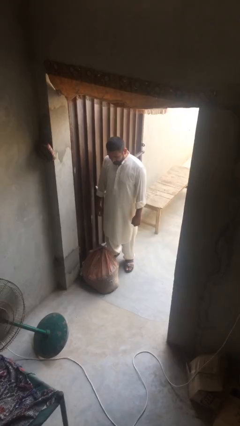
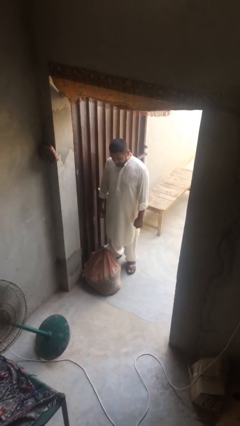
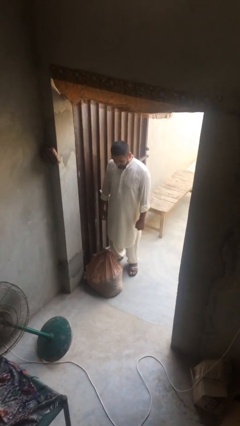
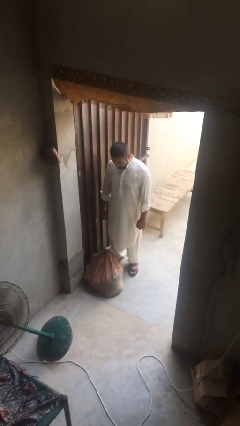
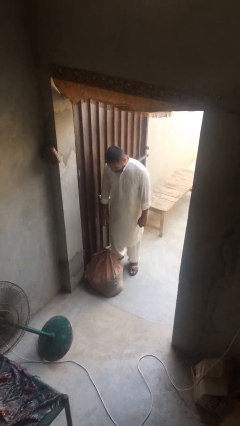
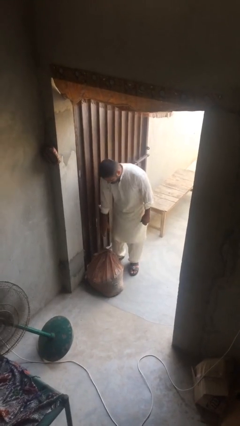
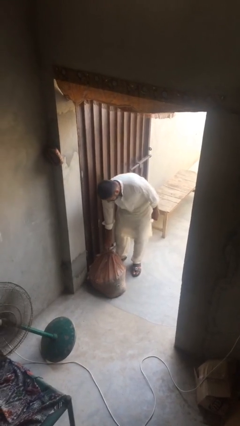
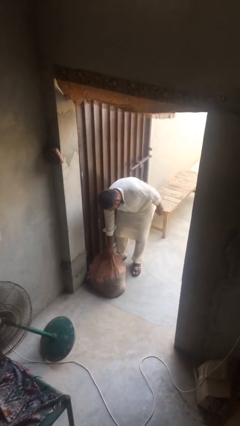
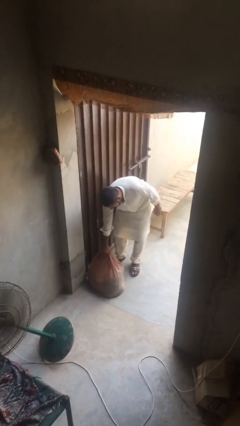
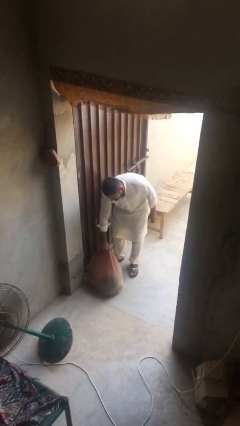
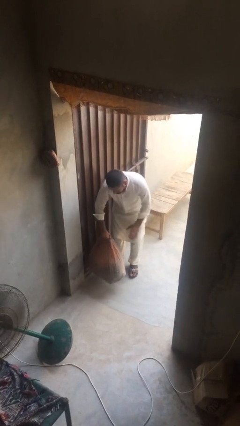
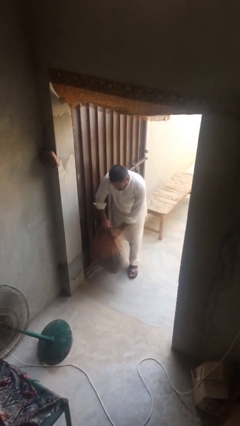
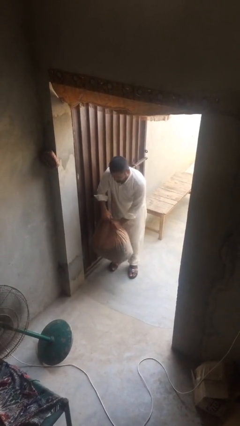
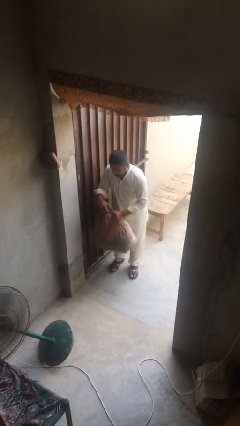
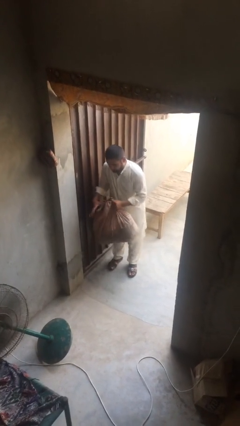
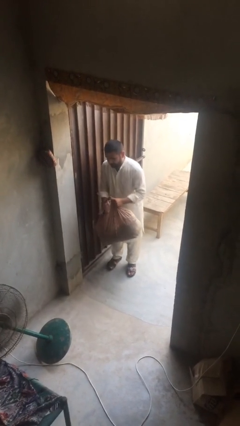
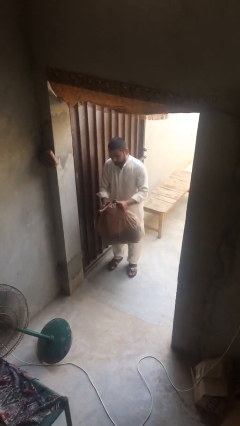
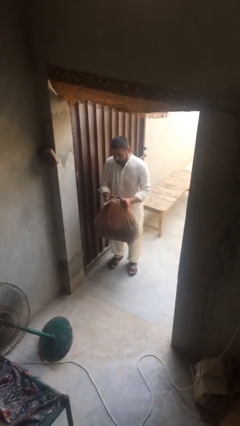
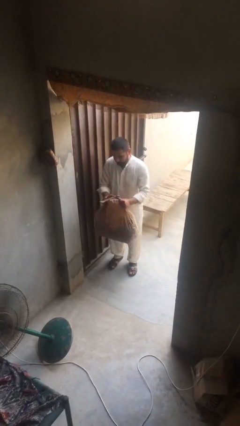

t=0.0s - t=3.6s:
person picks up object from floor

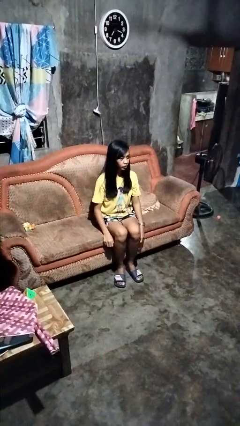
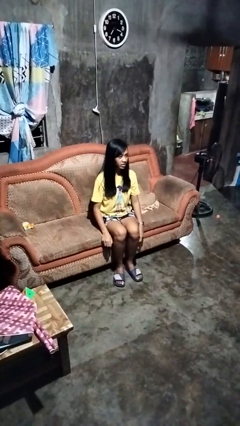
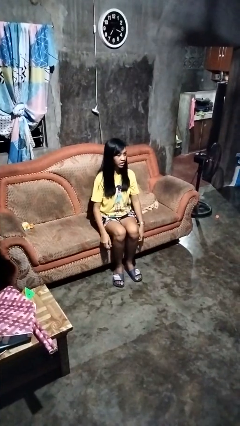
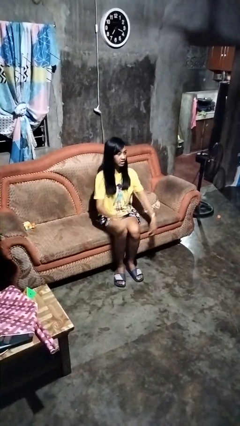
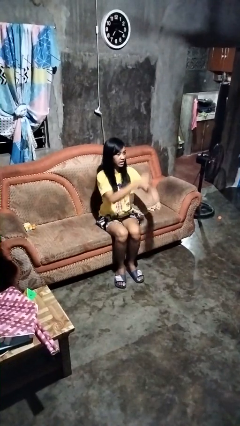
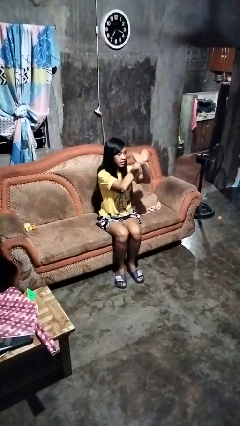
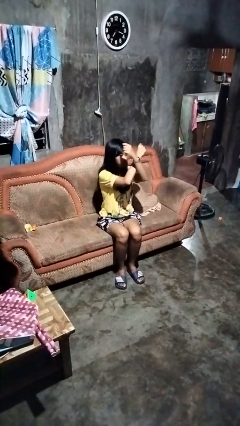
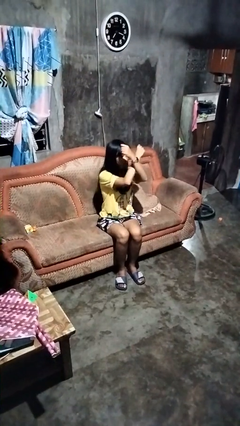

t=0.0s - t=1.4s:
person gestures arms x

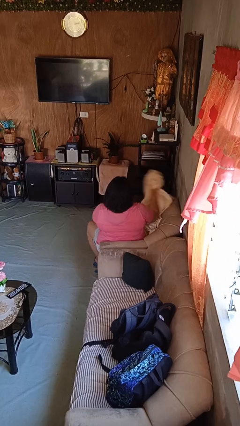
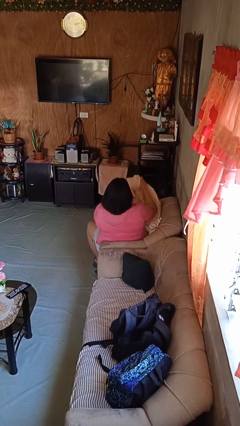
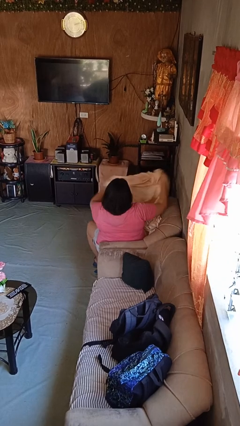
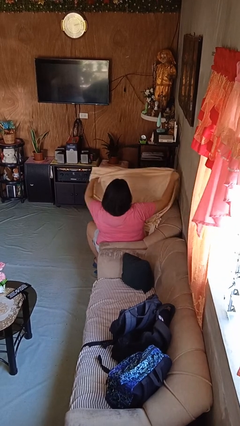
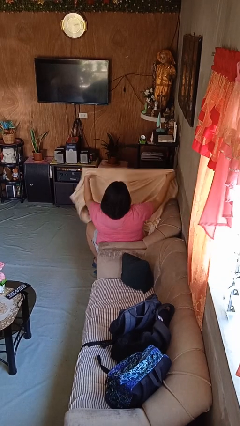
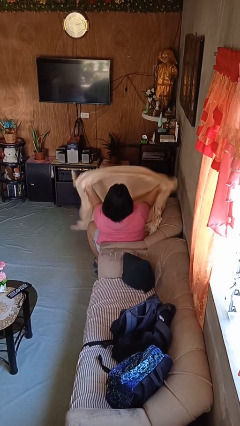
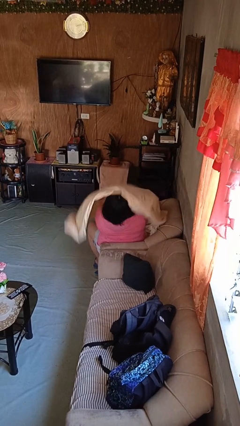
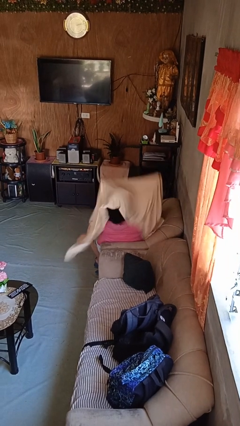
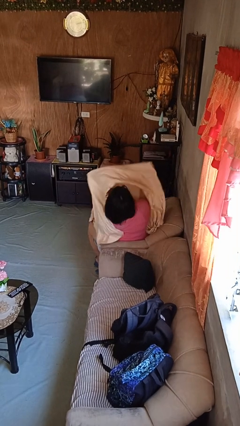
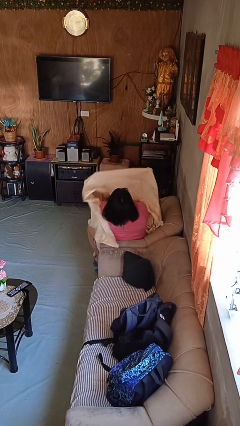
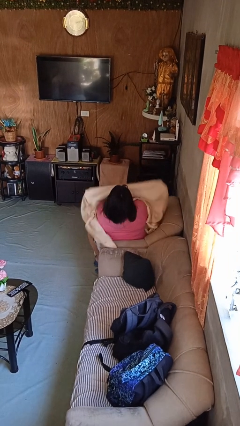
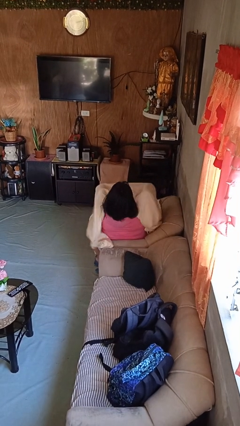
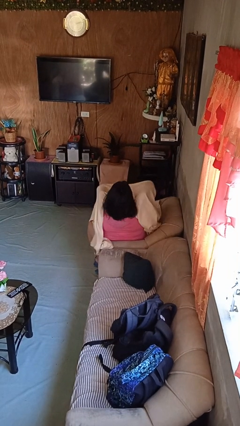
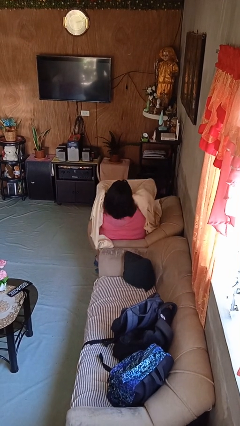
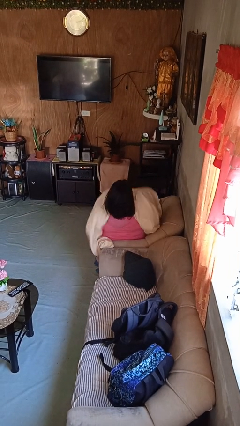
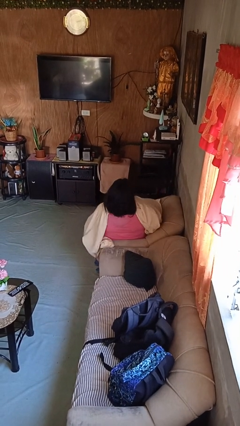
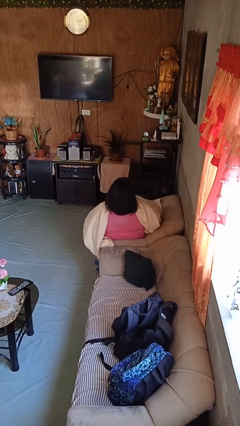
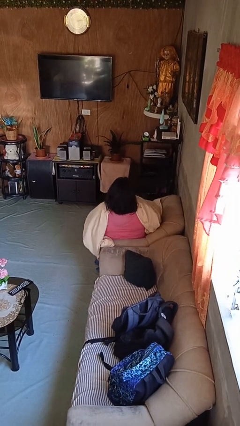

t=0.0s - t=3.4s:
person covers with blanket

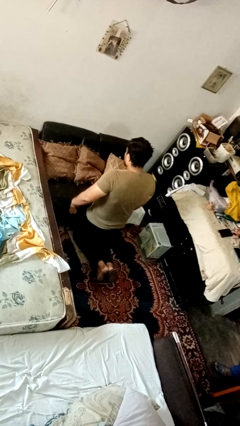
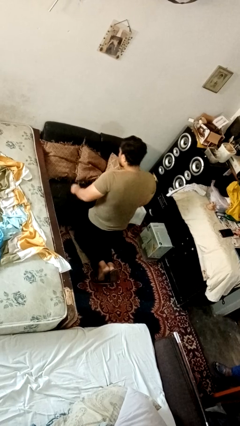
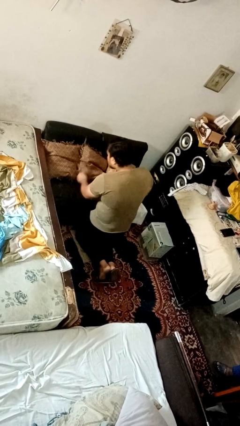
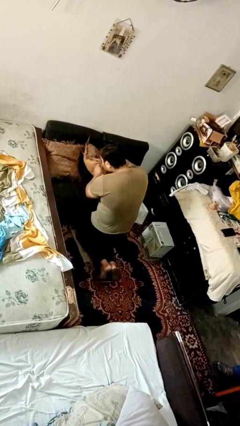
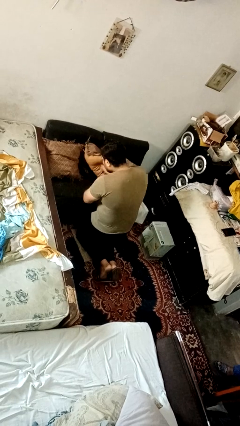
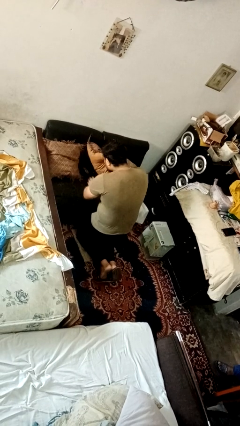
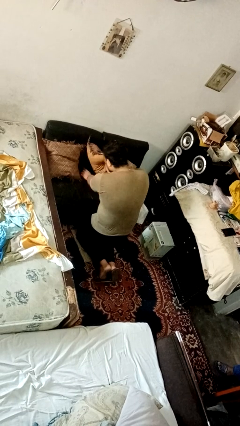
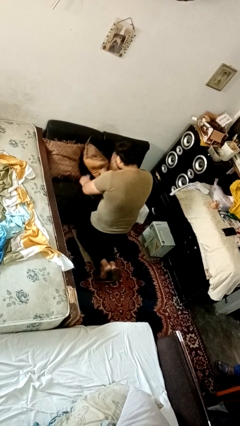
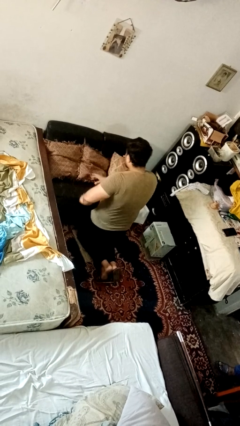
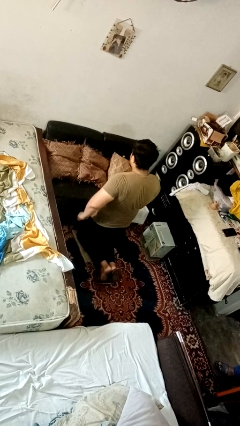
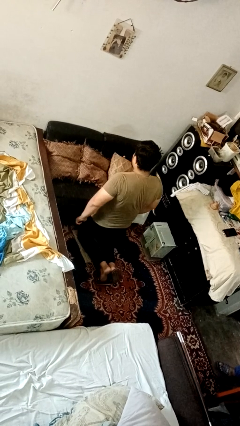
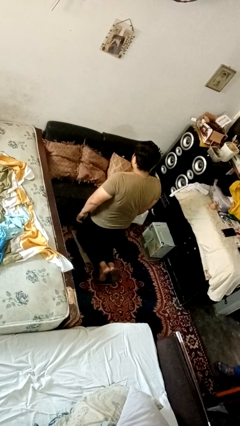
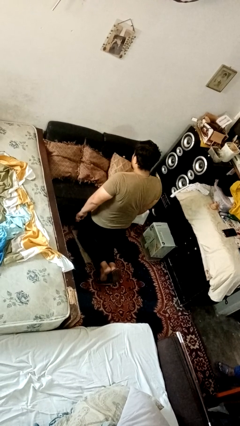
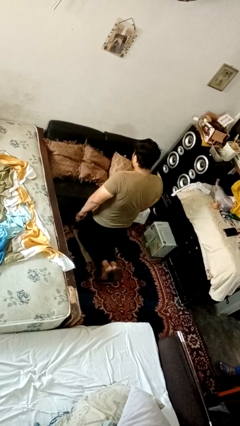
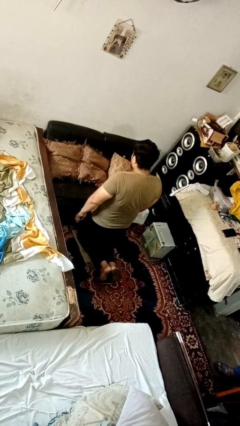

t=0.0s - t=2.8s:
person searches in couch

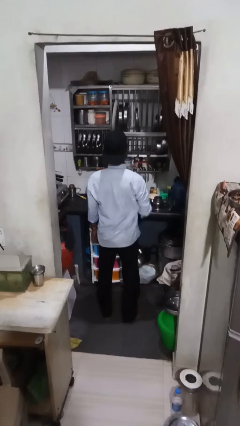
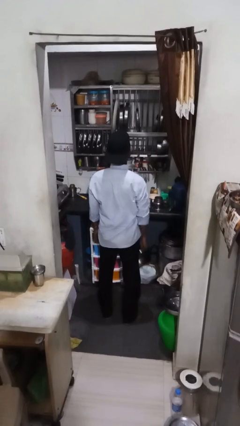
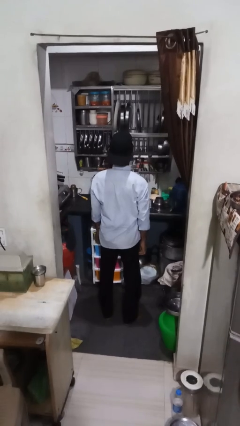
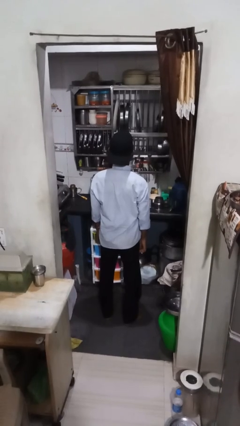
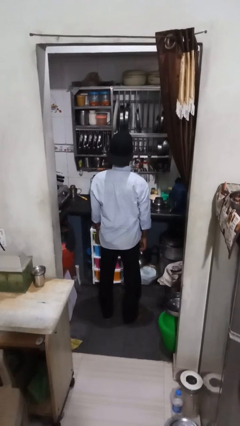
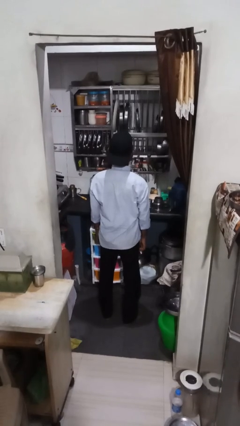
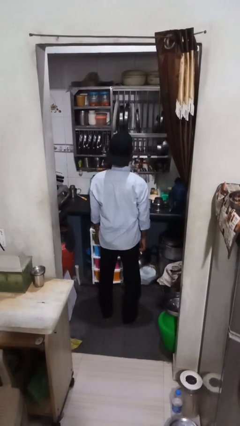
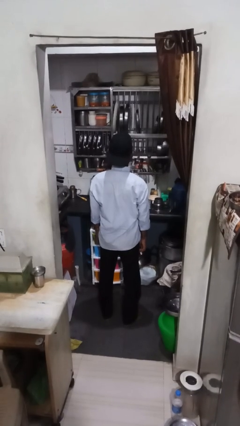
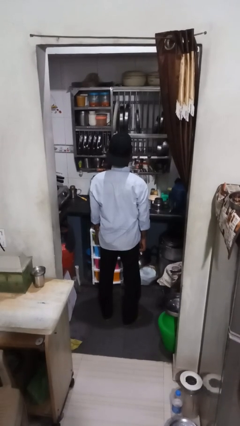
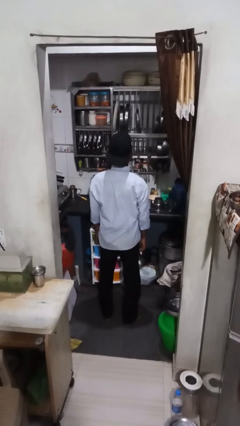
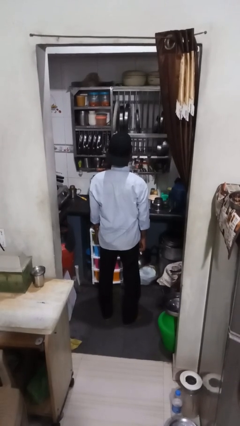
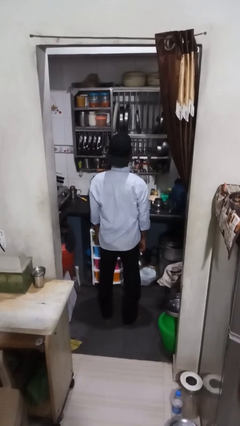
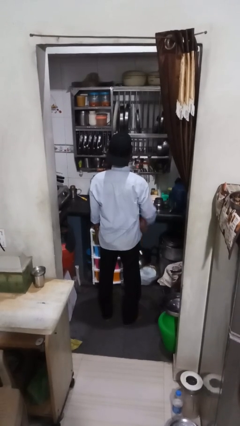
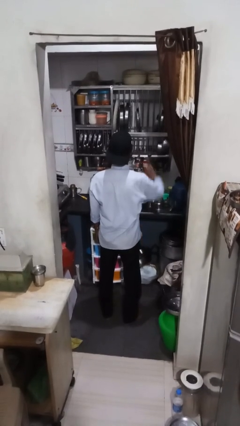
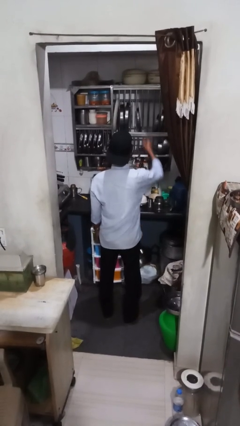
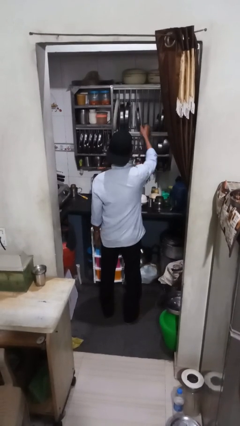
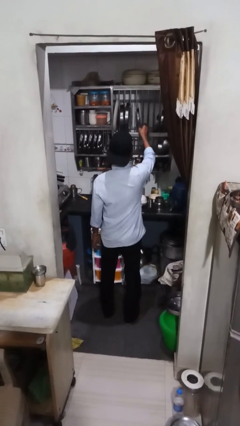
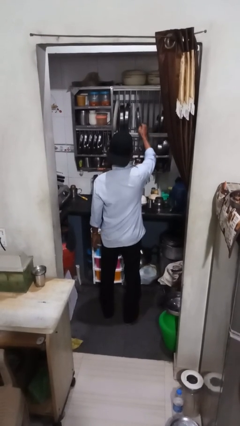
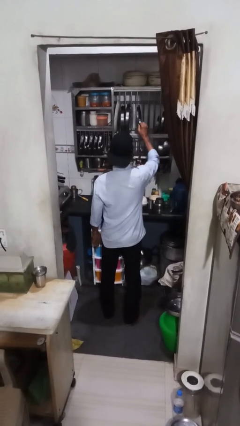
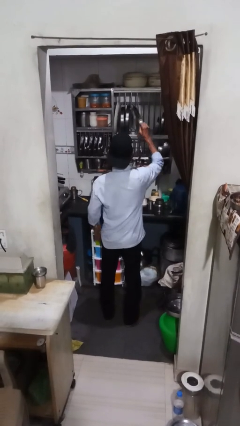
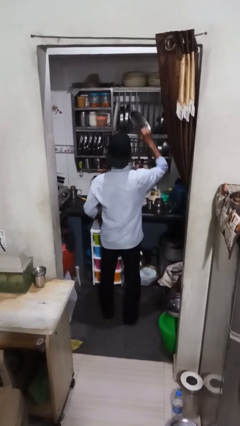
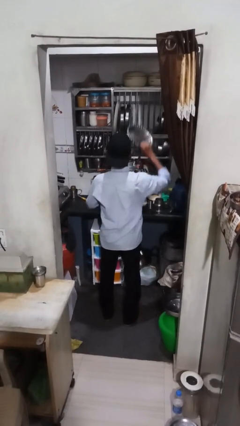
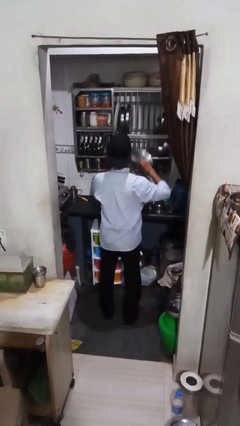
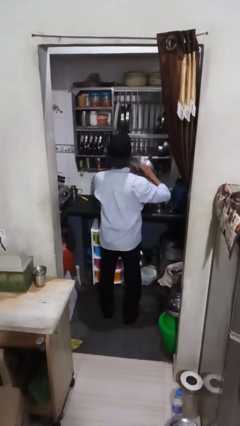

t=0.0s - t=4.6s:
person takes object from cabinet

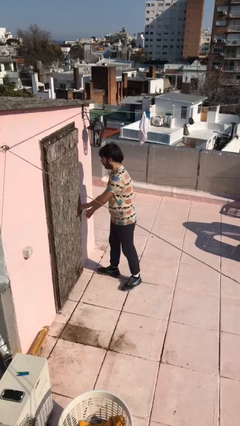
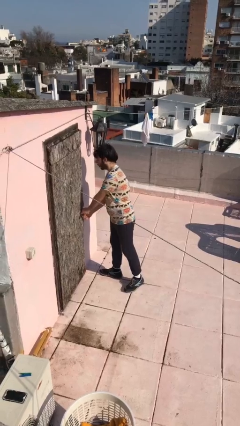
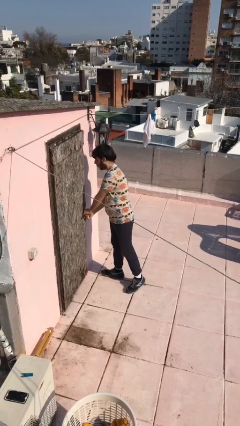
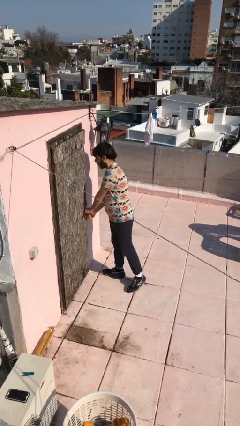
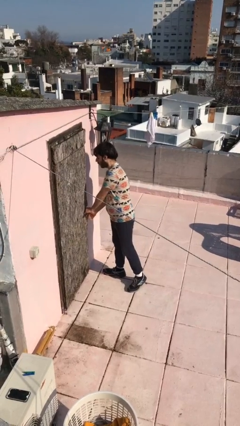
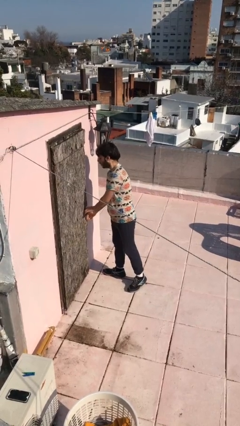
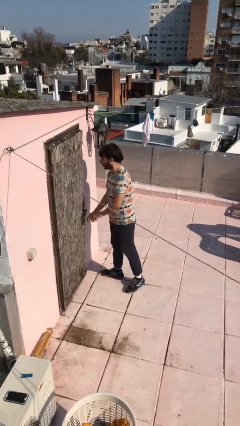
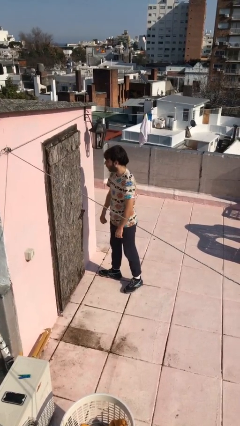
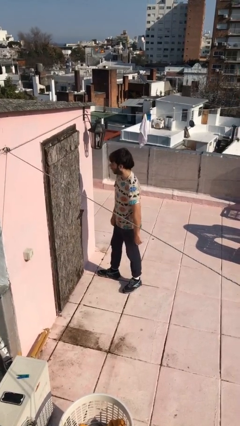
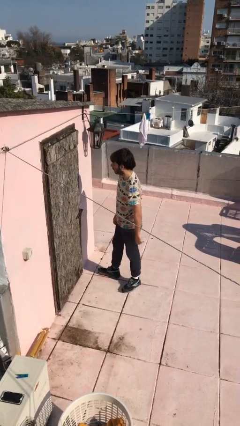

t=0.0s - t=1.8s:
person locks door with keys

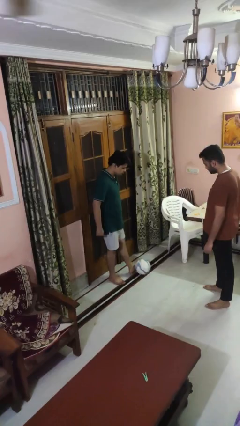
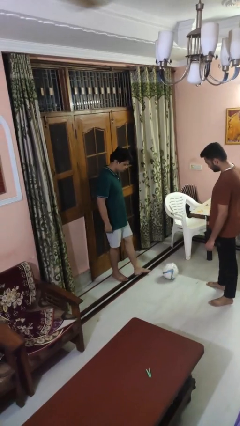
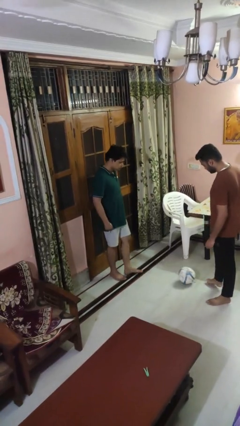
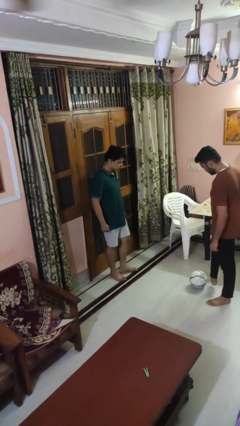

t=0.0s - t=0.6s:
person kicks object to person
